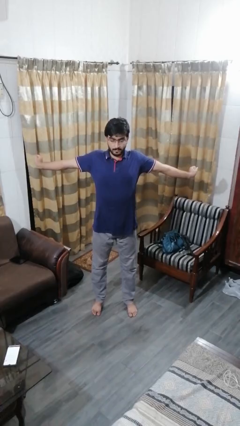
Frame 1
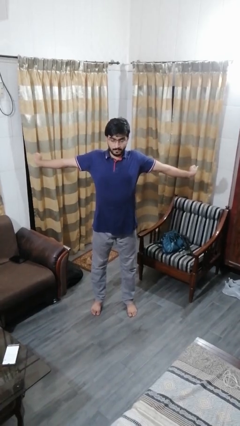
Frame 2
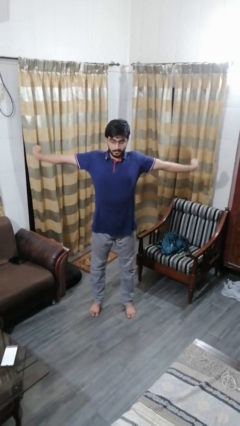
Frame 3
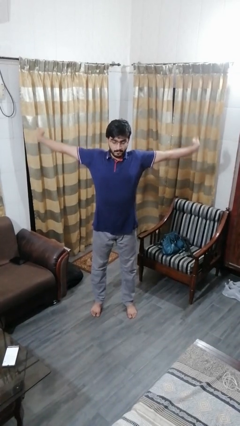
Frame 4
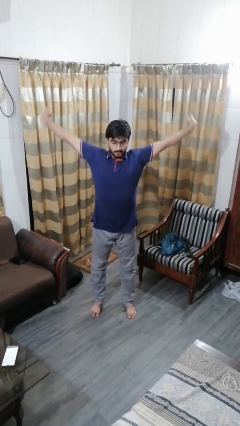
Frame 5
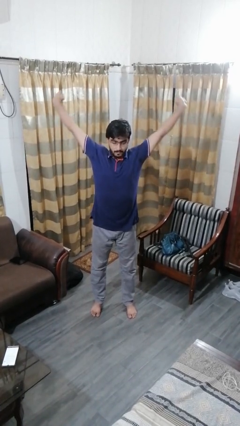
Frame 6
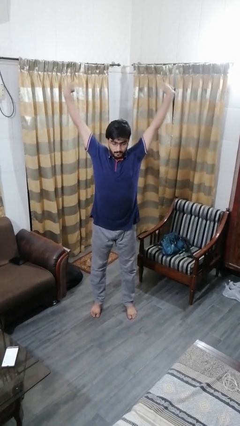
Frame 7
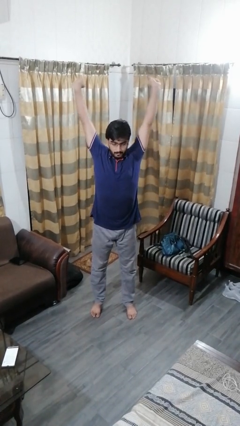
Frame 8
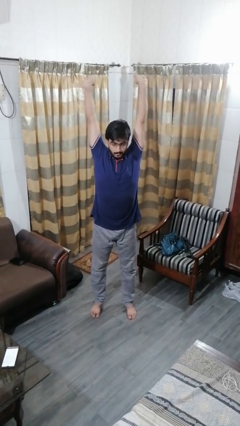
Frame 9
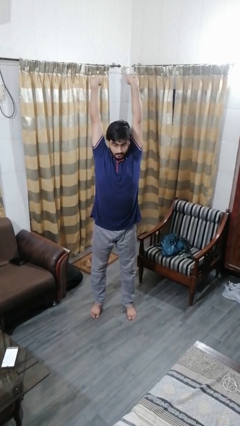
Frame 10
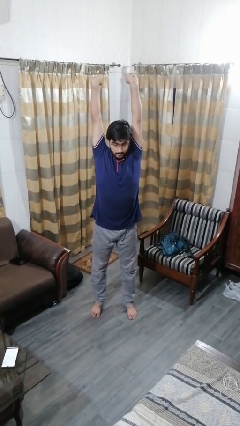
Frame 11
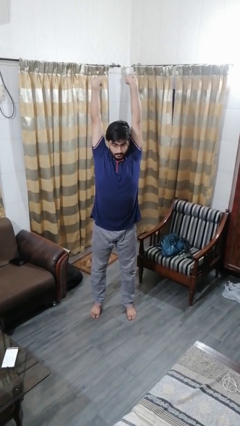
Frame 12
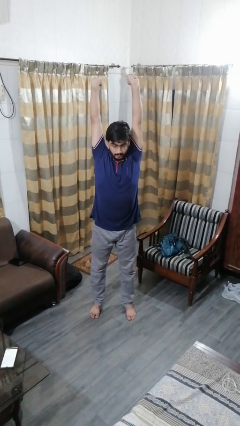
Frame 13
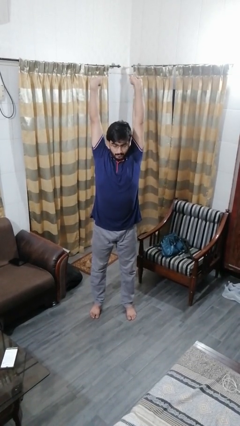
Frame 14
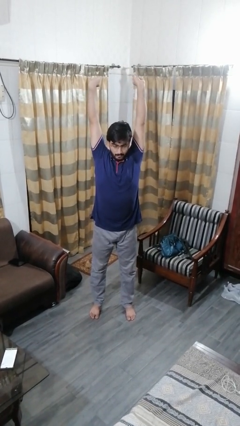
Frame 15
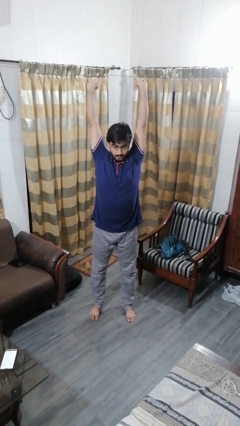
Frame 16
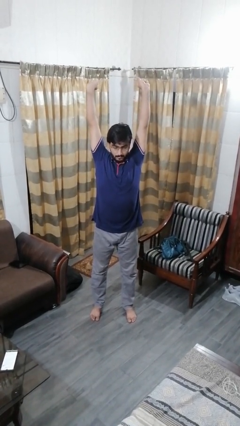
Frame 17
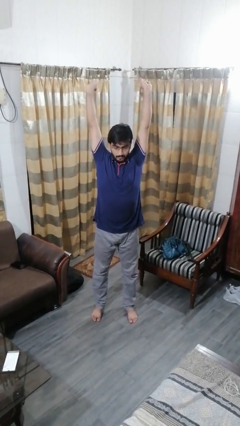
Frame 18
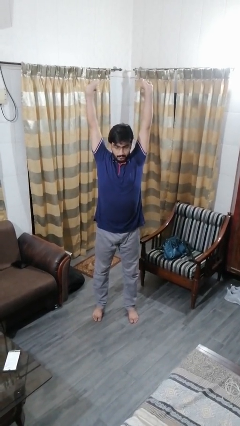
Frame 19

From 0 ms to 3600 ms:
person stretches arms over head

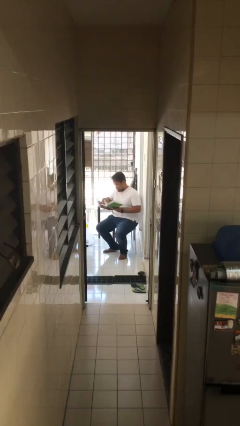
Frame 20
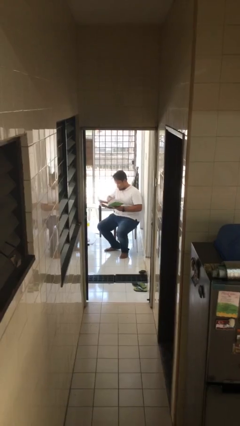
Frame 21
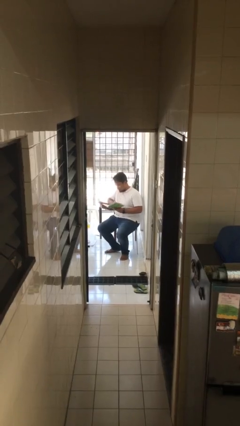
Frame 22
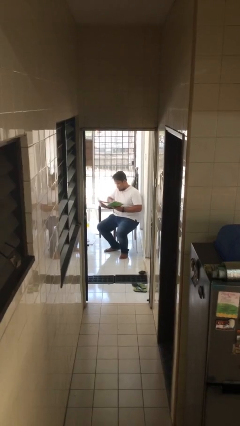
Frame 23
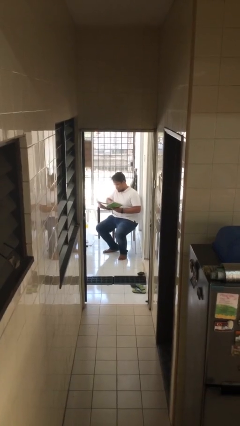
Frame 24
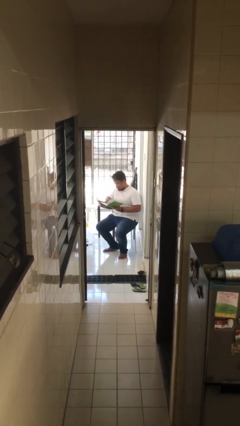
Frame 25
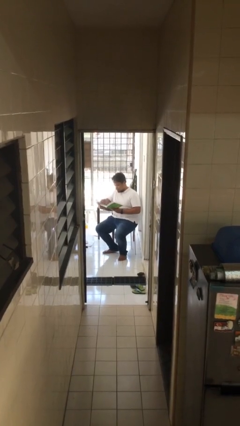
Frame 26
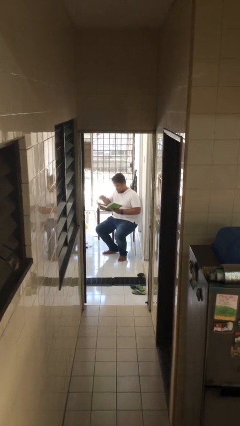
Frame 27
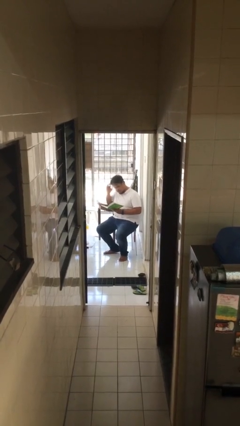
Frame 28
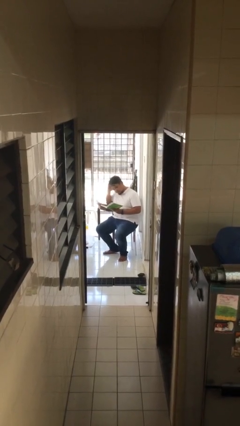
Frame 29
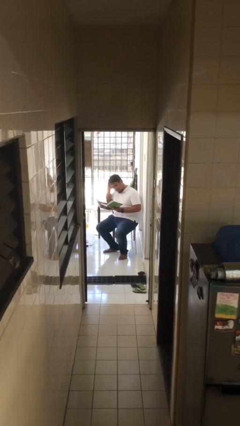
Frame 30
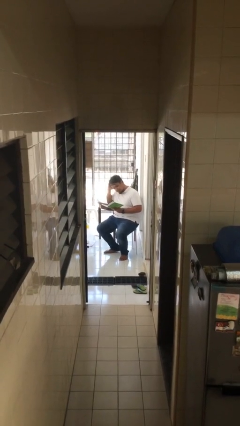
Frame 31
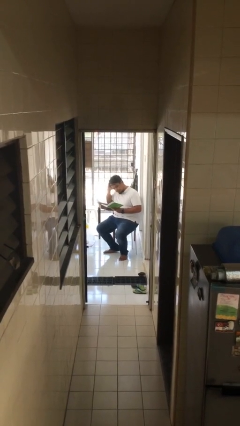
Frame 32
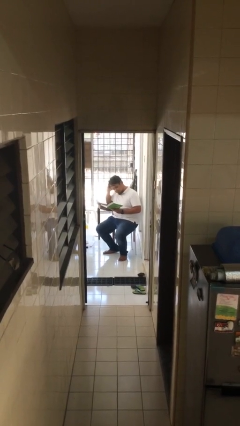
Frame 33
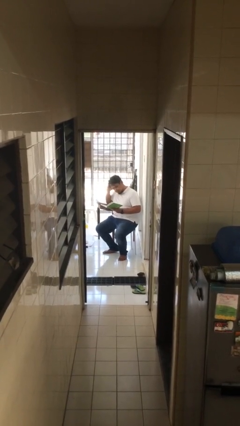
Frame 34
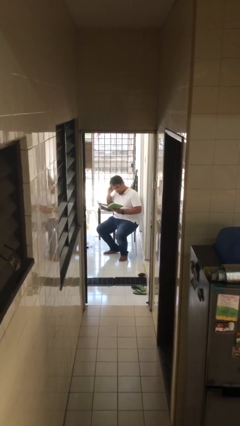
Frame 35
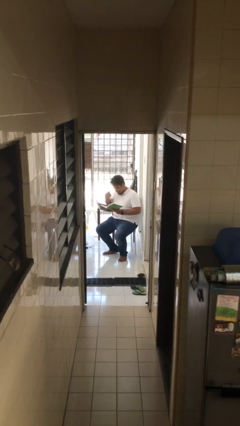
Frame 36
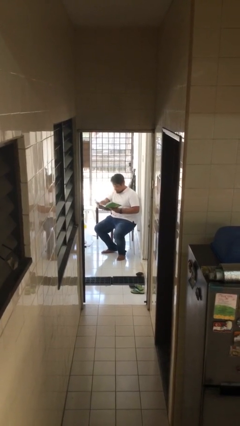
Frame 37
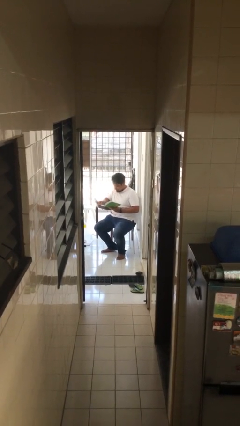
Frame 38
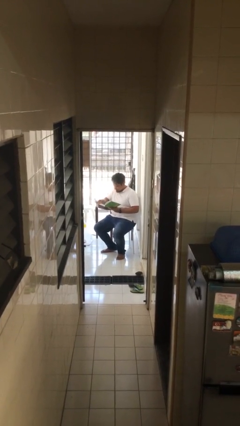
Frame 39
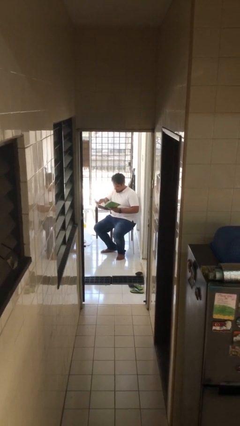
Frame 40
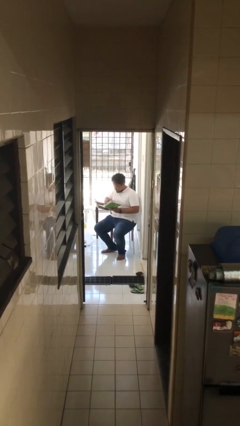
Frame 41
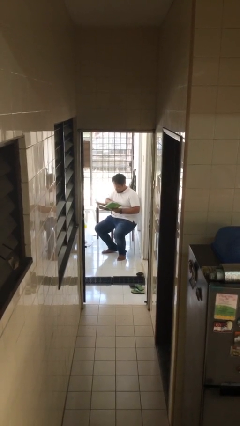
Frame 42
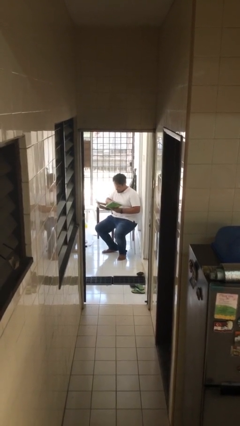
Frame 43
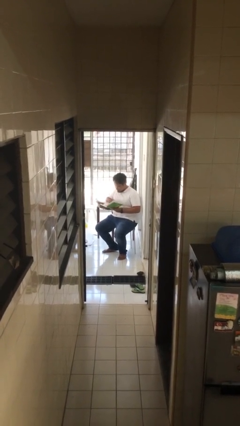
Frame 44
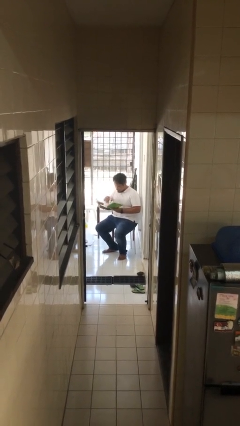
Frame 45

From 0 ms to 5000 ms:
person reads document

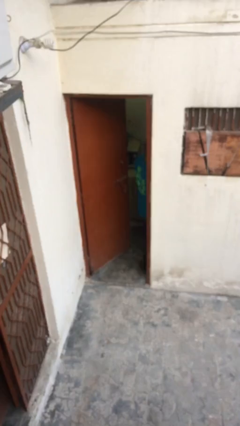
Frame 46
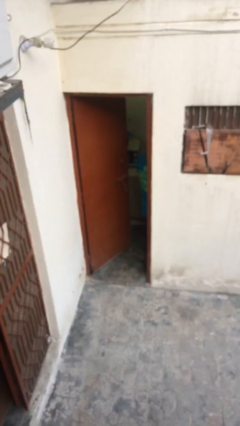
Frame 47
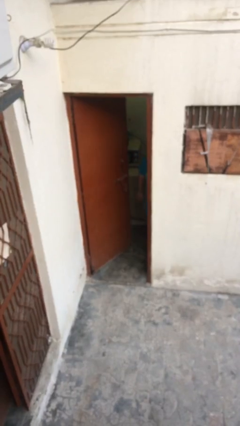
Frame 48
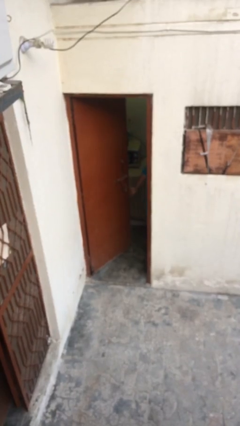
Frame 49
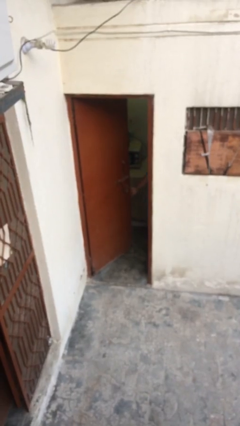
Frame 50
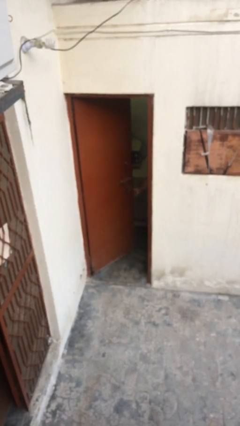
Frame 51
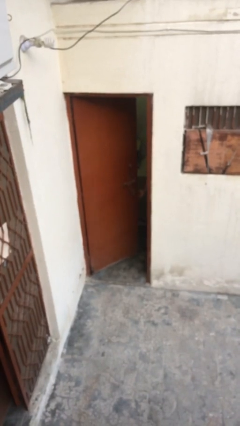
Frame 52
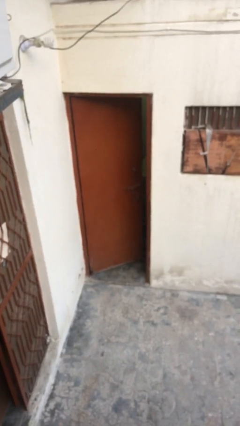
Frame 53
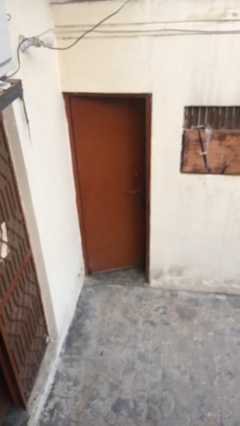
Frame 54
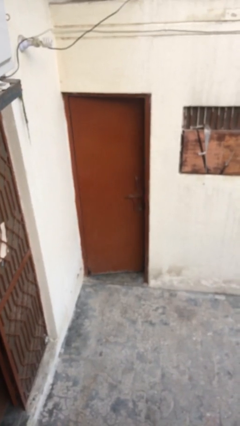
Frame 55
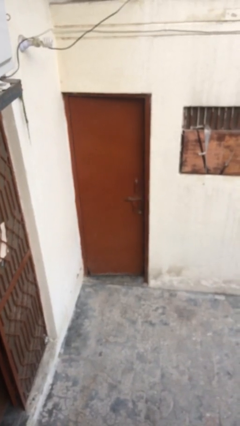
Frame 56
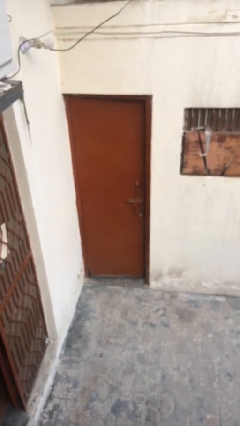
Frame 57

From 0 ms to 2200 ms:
person closes facility door

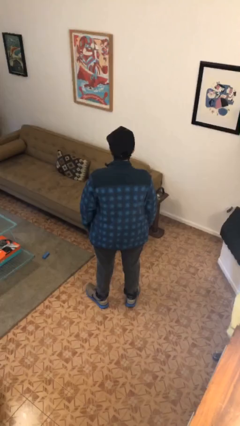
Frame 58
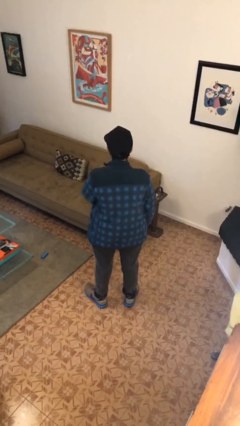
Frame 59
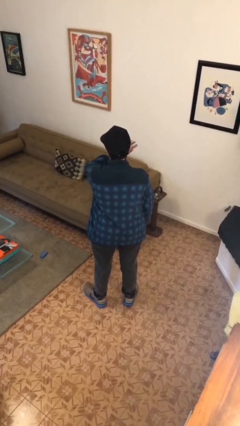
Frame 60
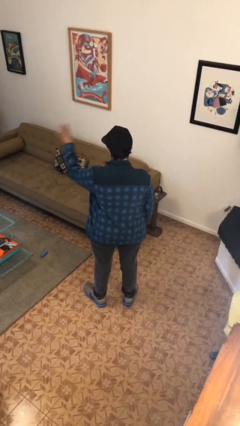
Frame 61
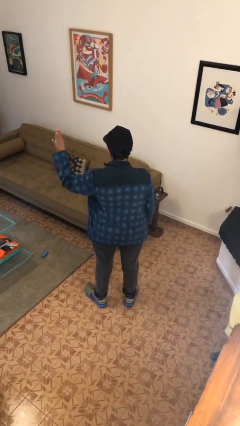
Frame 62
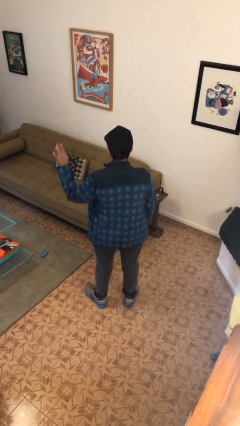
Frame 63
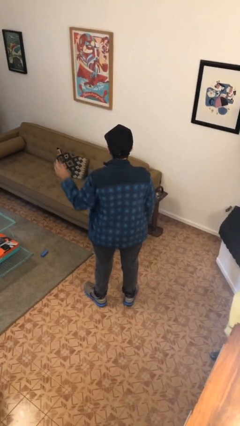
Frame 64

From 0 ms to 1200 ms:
person gestures swipe left

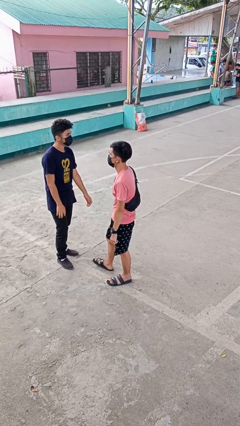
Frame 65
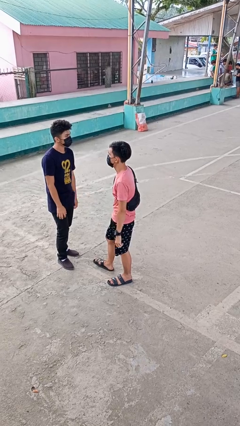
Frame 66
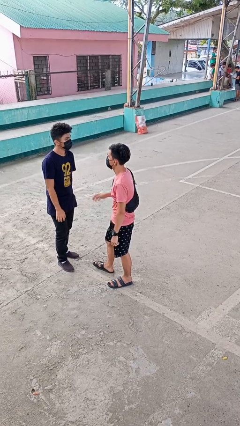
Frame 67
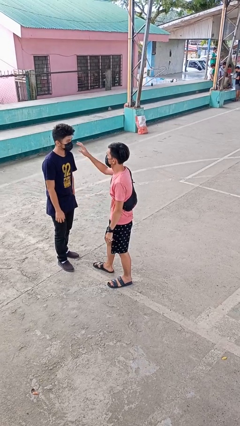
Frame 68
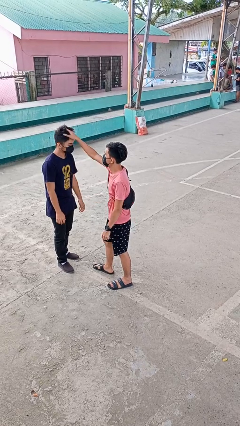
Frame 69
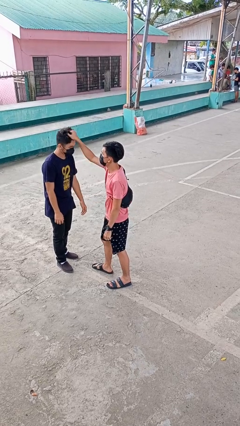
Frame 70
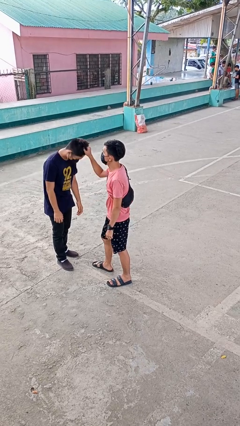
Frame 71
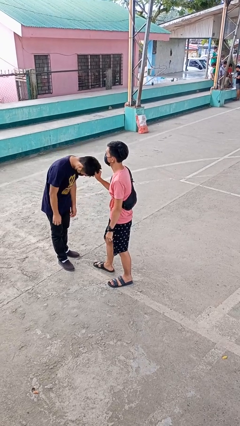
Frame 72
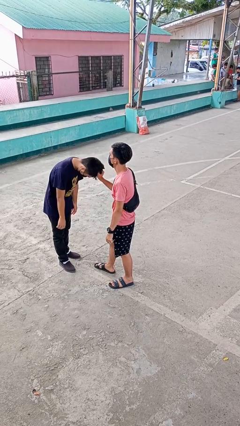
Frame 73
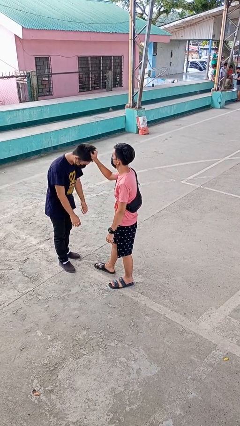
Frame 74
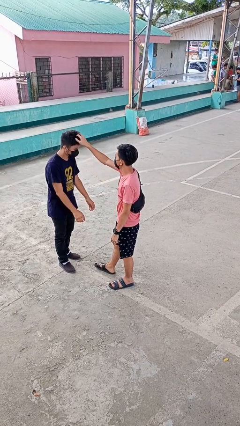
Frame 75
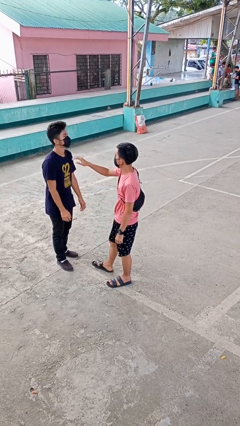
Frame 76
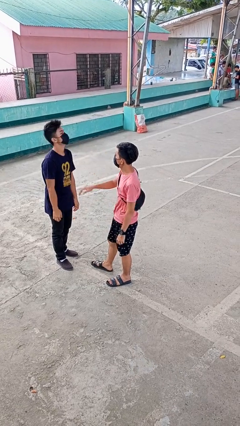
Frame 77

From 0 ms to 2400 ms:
person grabs person by hair

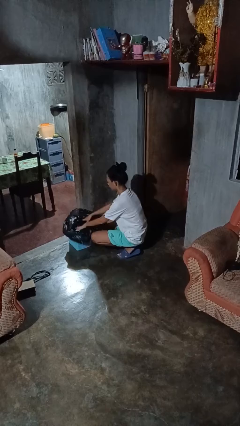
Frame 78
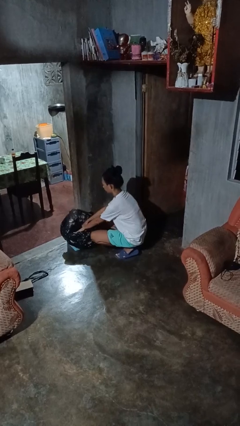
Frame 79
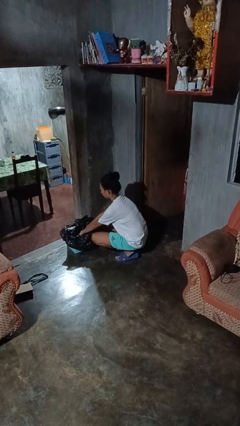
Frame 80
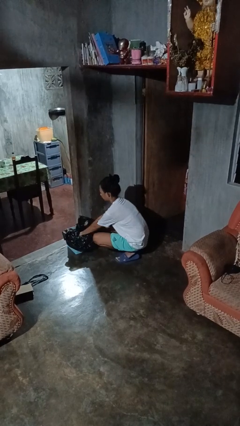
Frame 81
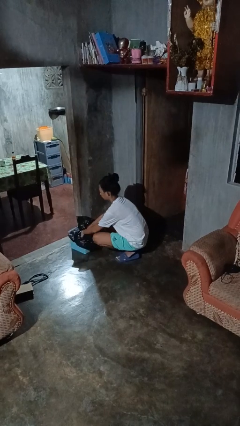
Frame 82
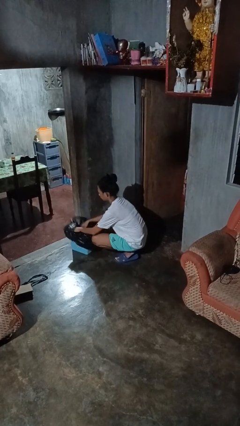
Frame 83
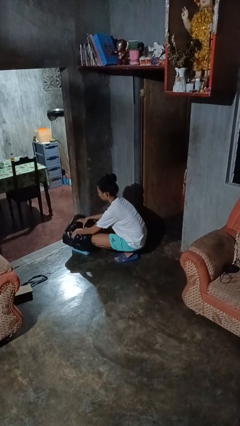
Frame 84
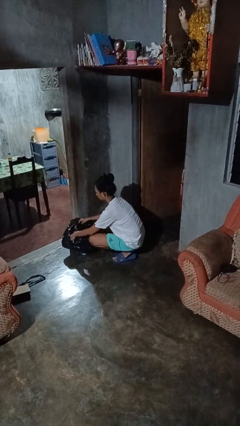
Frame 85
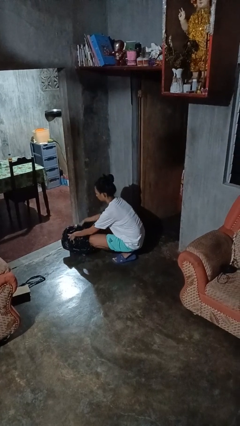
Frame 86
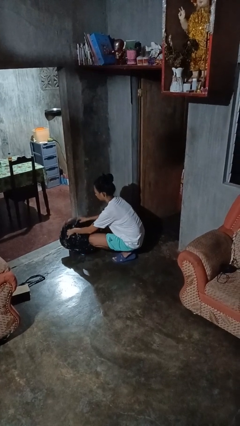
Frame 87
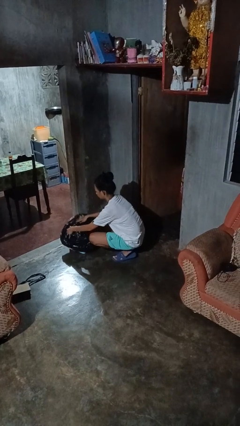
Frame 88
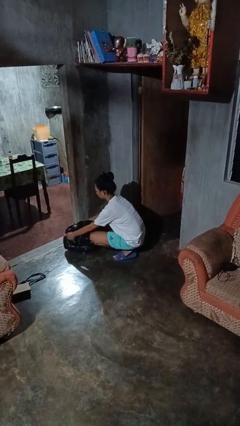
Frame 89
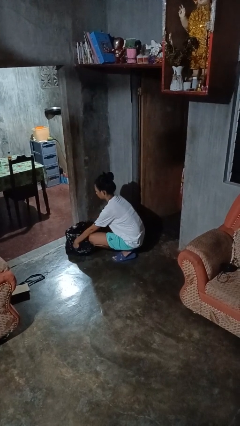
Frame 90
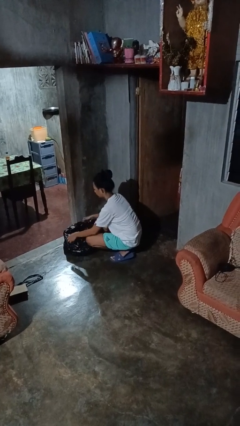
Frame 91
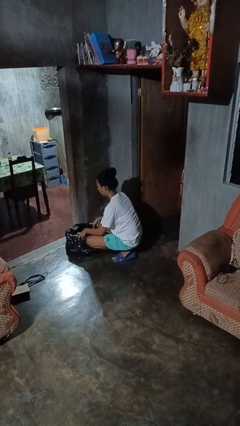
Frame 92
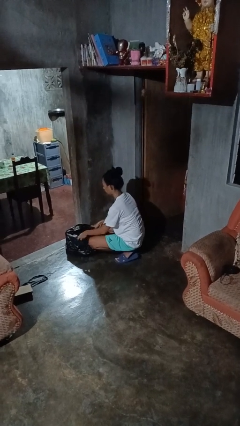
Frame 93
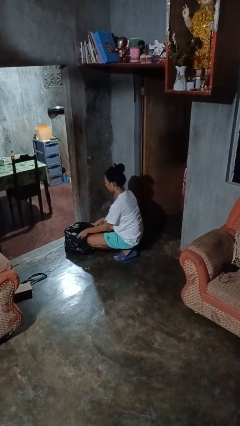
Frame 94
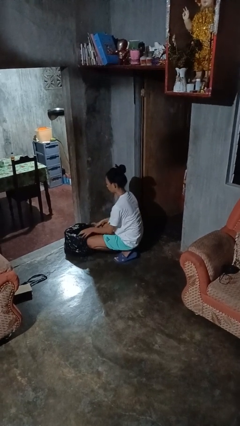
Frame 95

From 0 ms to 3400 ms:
person inserts trashbag into trashcan
